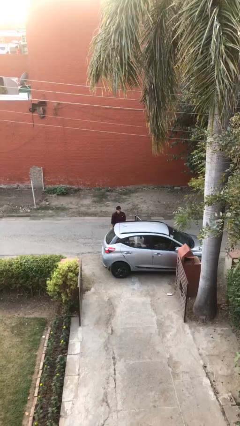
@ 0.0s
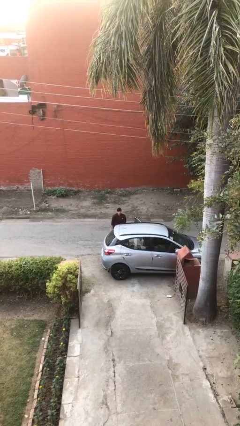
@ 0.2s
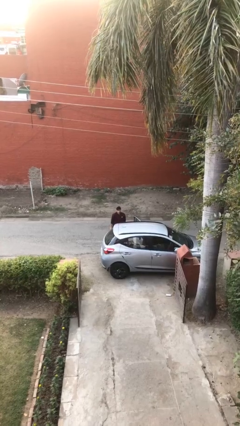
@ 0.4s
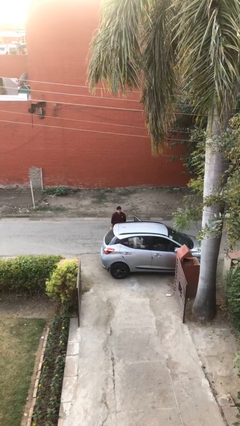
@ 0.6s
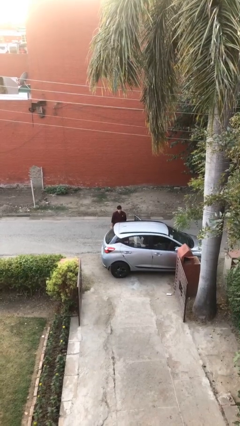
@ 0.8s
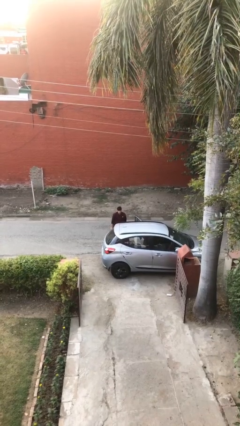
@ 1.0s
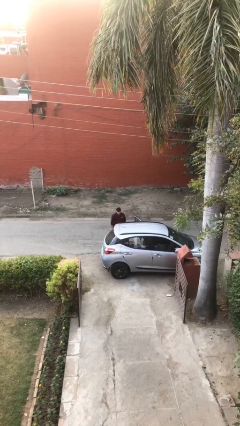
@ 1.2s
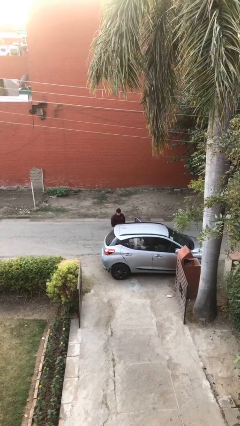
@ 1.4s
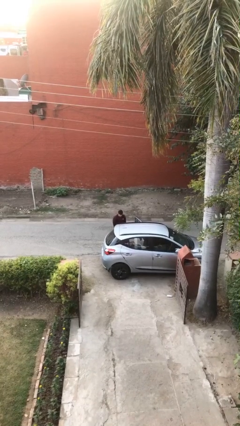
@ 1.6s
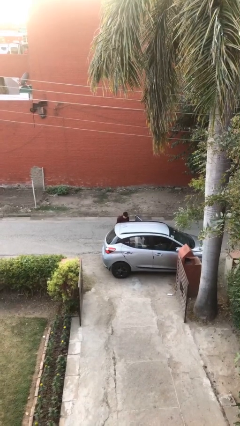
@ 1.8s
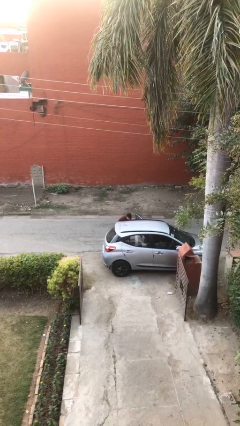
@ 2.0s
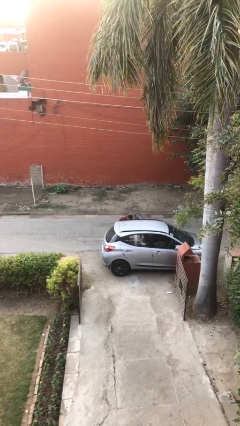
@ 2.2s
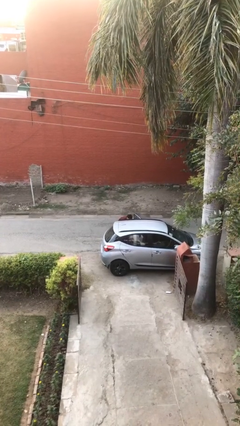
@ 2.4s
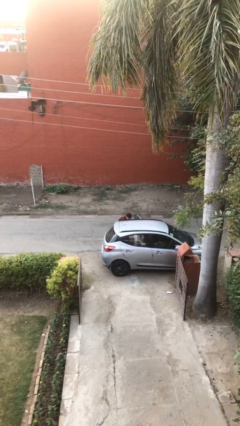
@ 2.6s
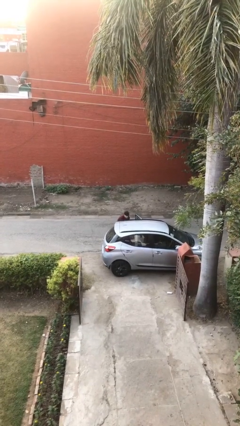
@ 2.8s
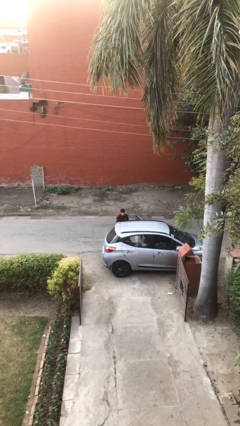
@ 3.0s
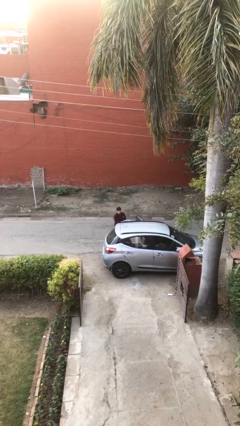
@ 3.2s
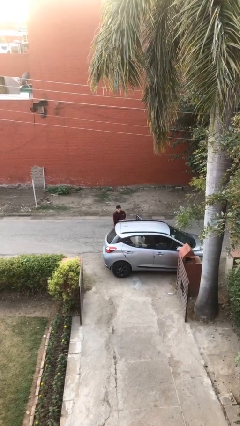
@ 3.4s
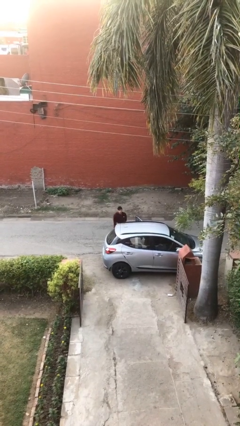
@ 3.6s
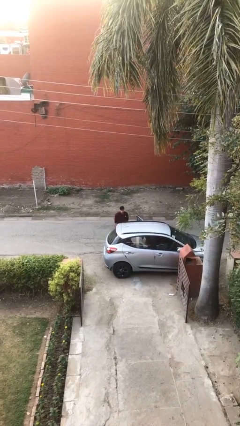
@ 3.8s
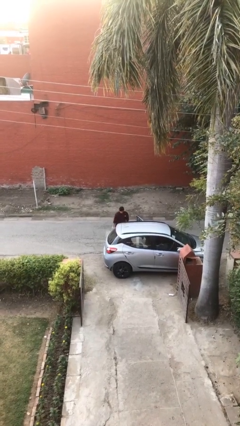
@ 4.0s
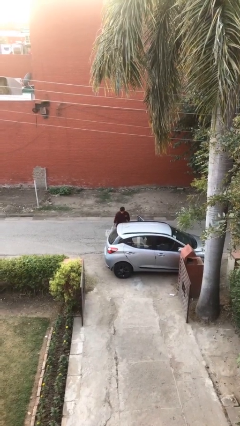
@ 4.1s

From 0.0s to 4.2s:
person unloads car

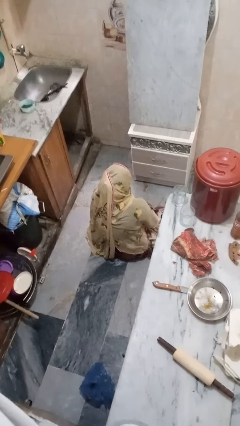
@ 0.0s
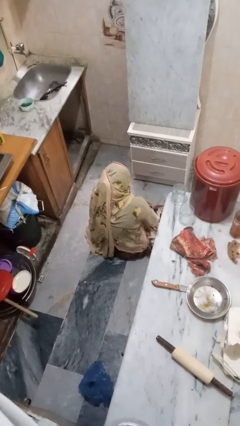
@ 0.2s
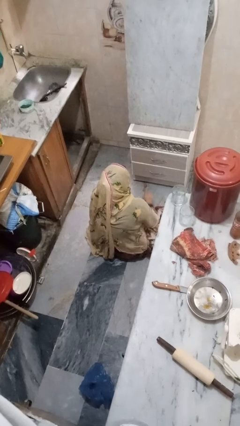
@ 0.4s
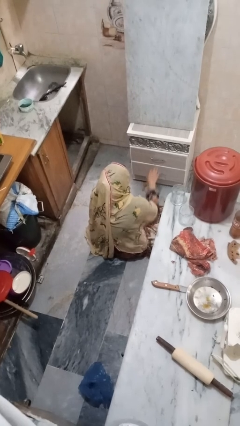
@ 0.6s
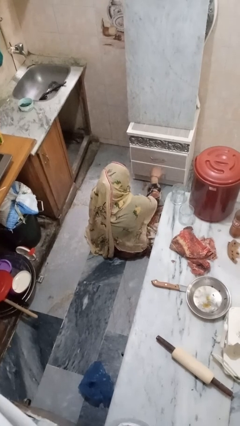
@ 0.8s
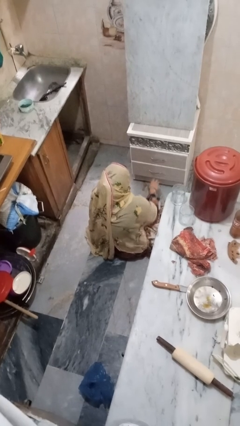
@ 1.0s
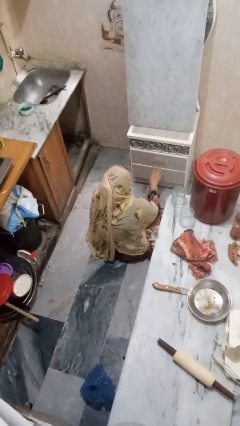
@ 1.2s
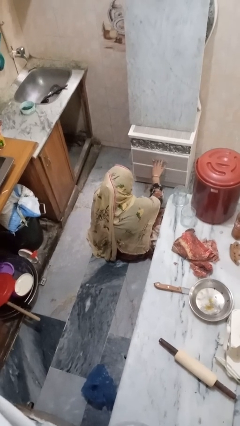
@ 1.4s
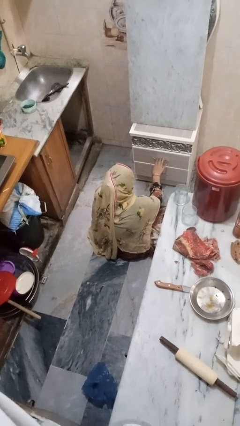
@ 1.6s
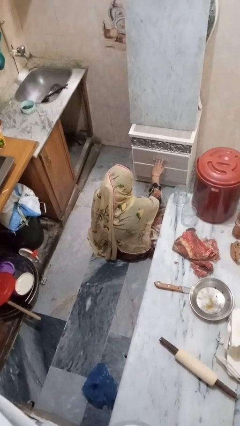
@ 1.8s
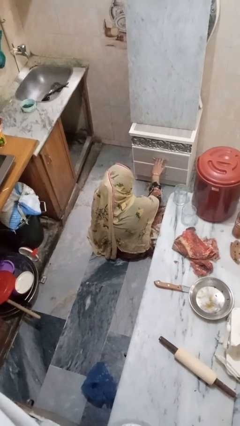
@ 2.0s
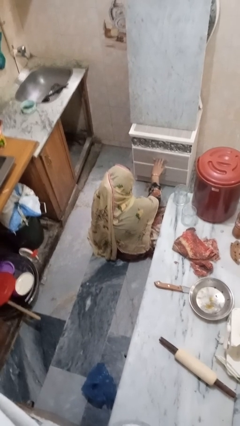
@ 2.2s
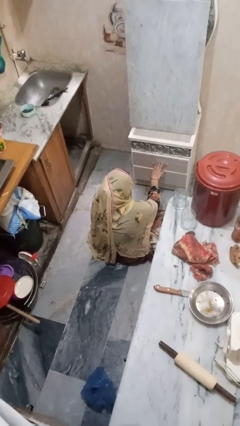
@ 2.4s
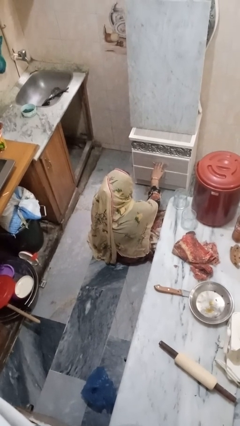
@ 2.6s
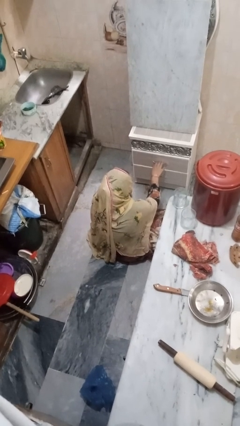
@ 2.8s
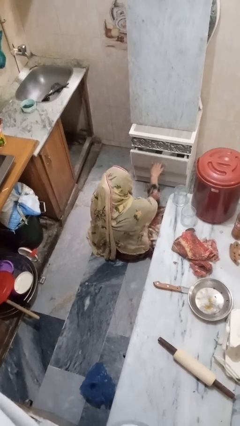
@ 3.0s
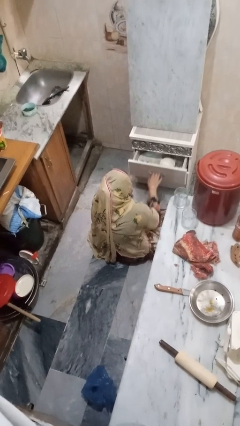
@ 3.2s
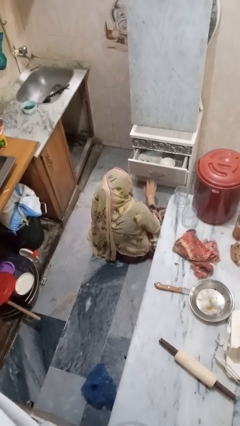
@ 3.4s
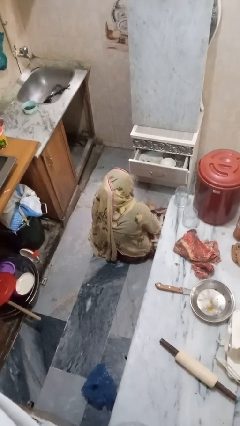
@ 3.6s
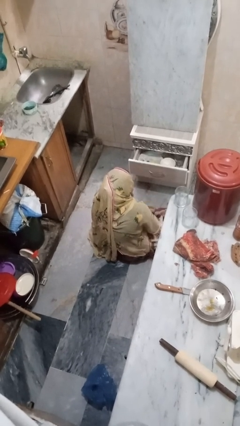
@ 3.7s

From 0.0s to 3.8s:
person opens kitchen drawer

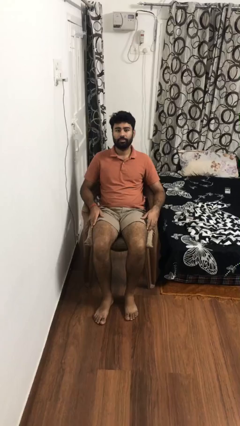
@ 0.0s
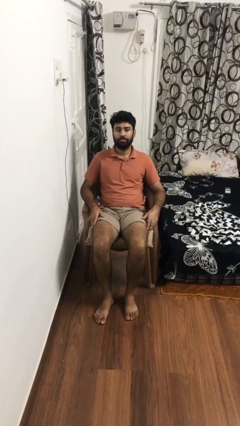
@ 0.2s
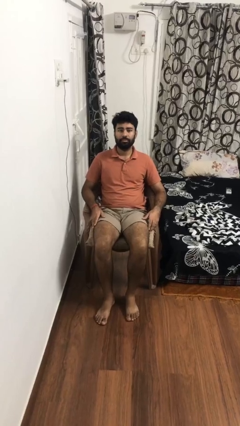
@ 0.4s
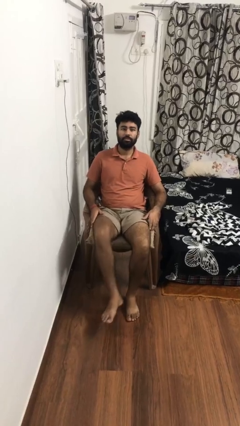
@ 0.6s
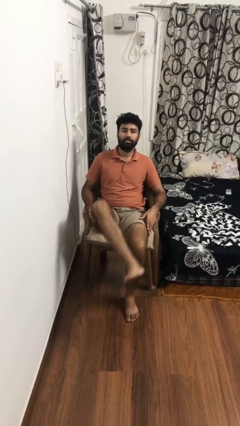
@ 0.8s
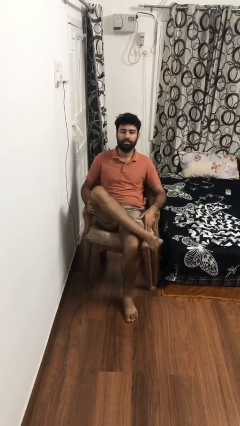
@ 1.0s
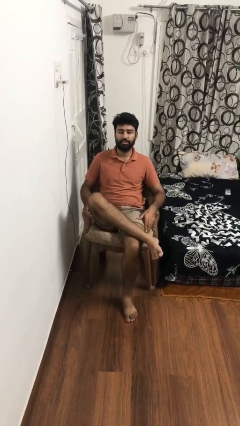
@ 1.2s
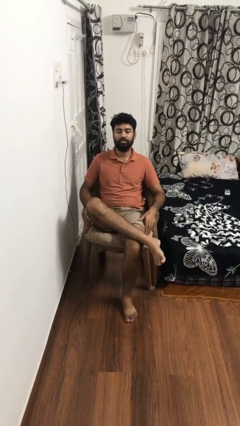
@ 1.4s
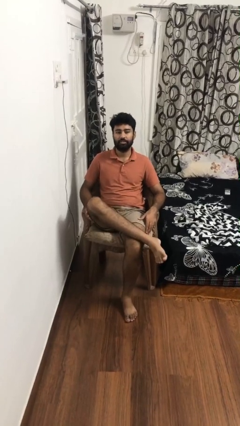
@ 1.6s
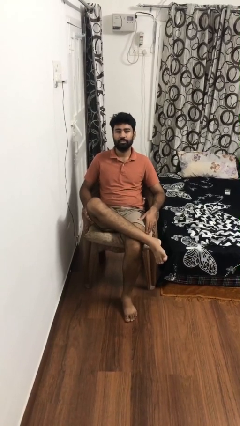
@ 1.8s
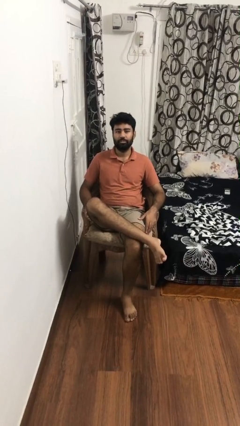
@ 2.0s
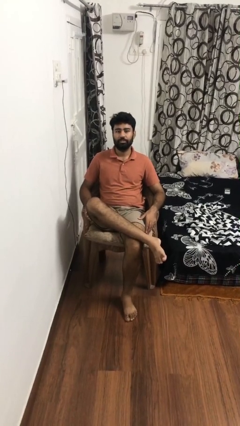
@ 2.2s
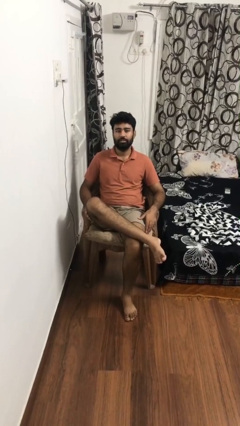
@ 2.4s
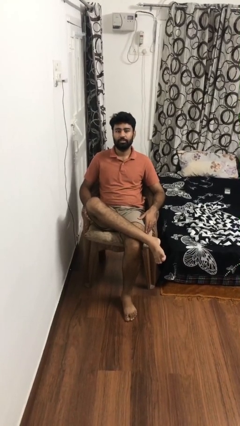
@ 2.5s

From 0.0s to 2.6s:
person crosses legs

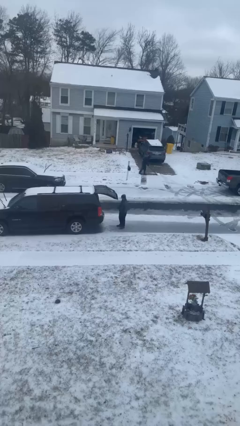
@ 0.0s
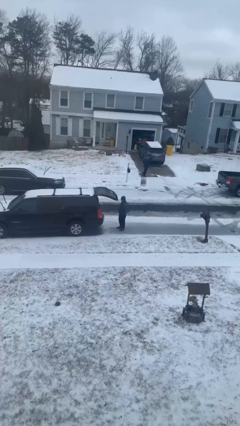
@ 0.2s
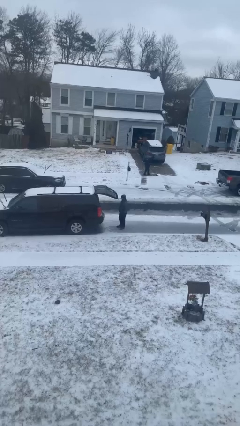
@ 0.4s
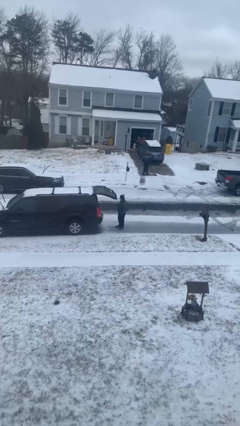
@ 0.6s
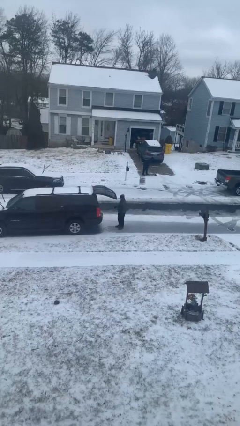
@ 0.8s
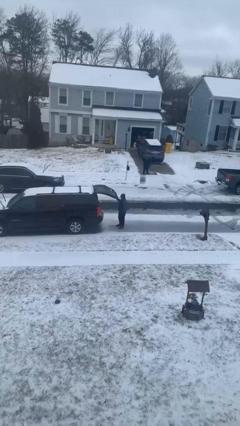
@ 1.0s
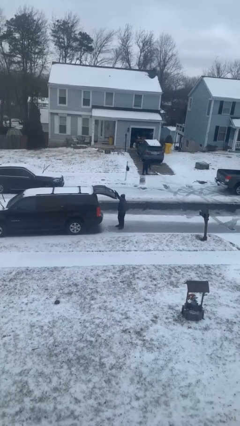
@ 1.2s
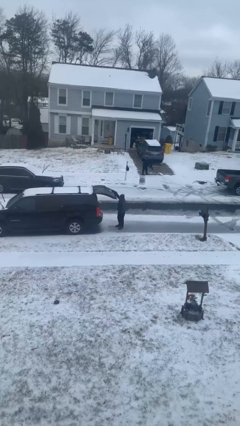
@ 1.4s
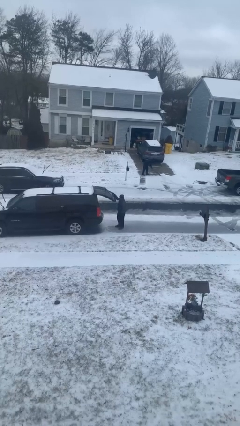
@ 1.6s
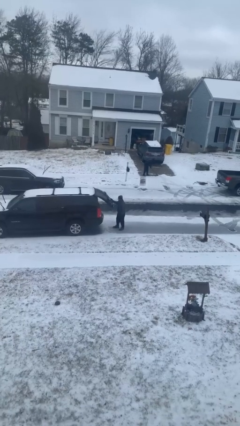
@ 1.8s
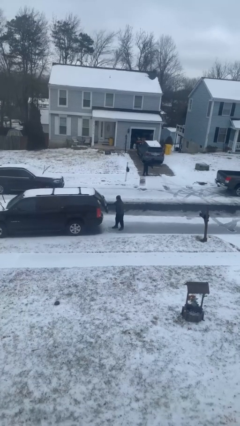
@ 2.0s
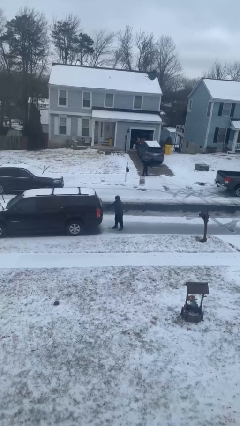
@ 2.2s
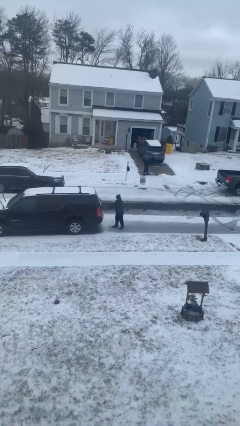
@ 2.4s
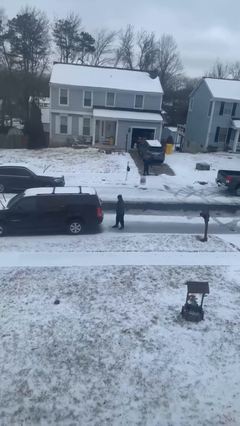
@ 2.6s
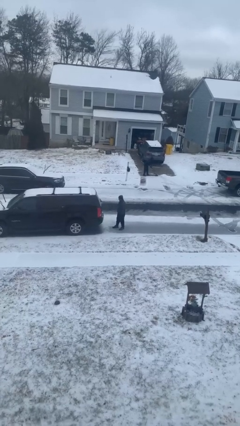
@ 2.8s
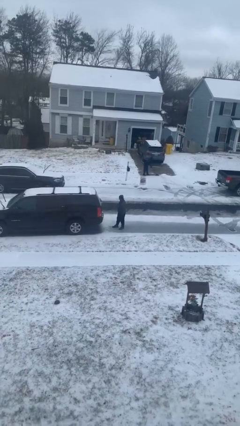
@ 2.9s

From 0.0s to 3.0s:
person closes car trunk

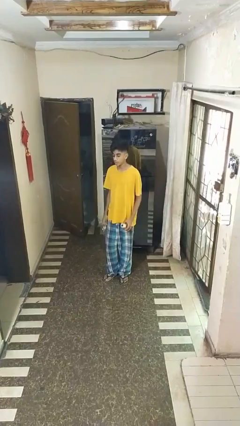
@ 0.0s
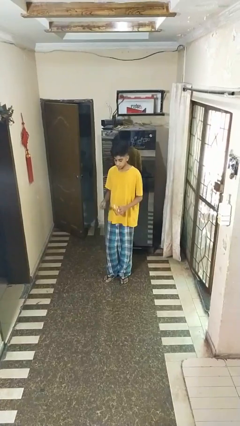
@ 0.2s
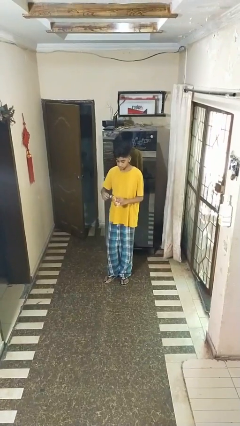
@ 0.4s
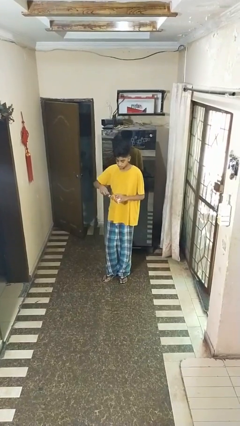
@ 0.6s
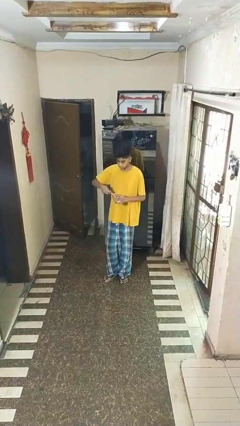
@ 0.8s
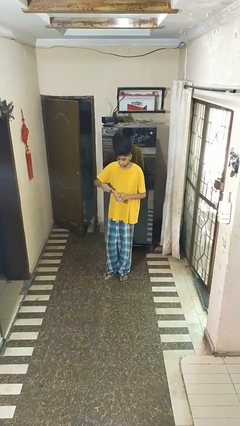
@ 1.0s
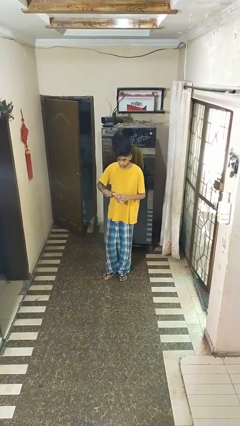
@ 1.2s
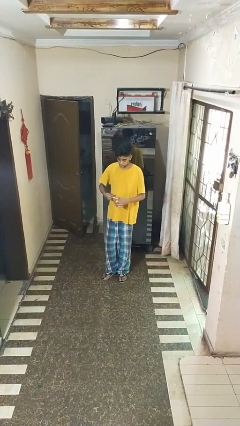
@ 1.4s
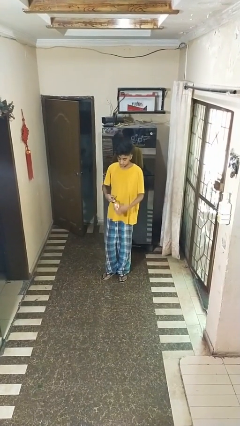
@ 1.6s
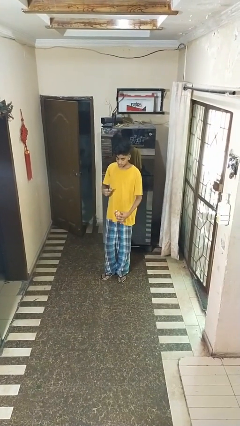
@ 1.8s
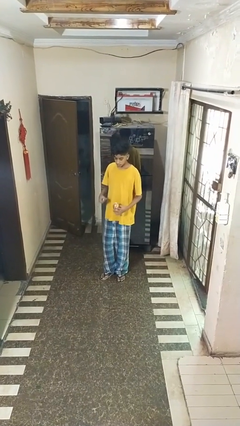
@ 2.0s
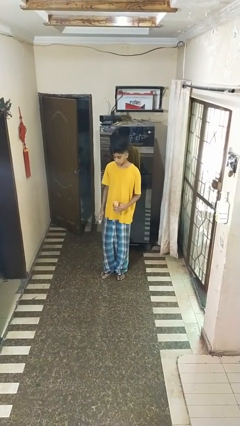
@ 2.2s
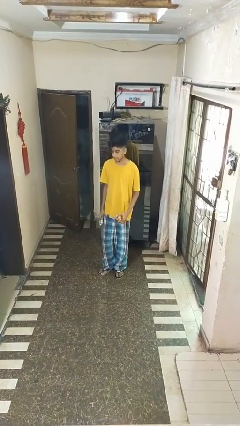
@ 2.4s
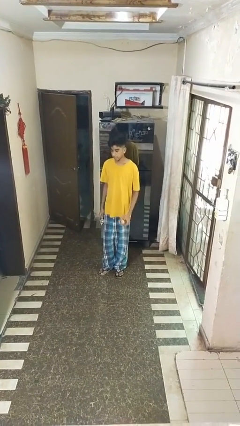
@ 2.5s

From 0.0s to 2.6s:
person opens can with can opener

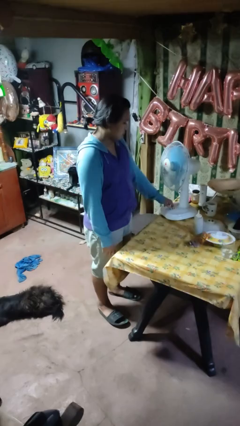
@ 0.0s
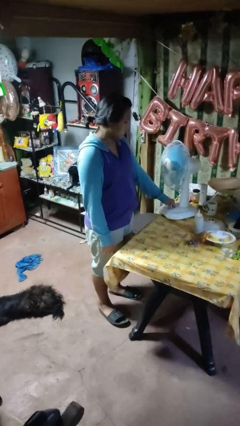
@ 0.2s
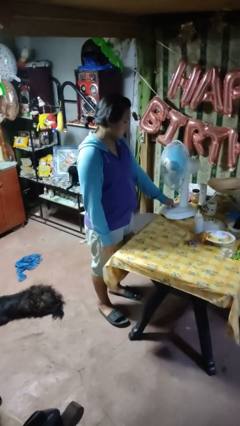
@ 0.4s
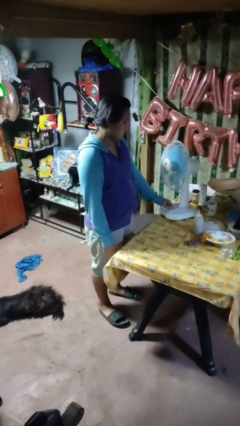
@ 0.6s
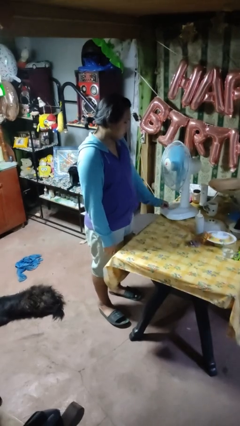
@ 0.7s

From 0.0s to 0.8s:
person turns off fan

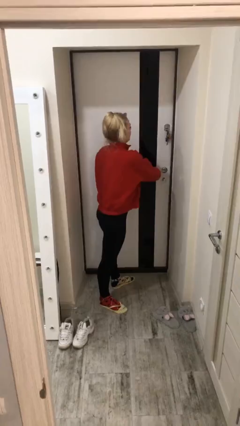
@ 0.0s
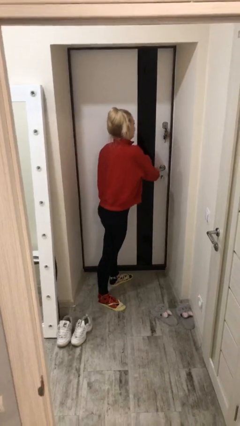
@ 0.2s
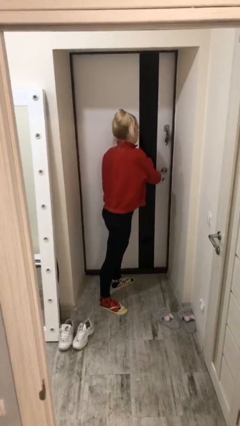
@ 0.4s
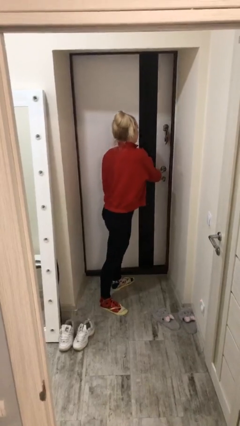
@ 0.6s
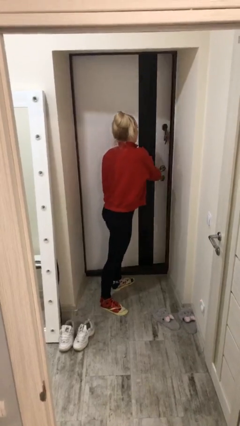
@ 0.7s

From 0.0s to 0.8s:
person opens facility door
